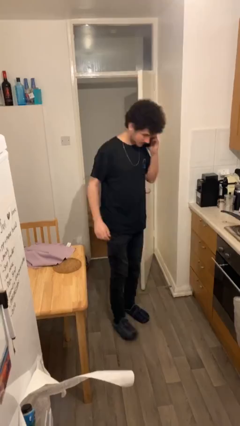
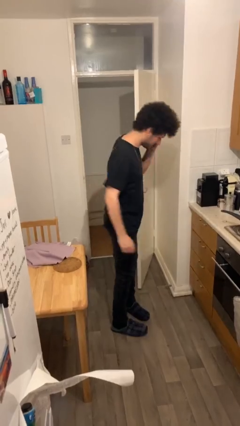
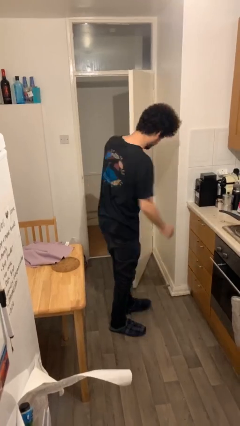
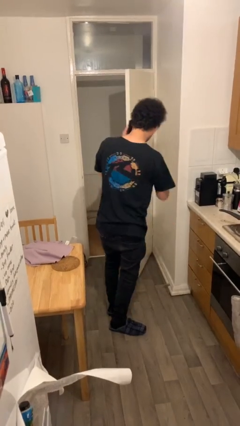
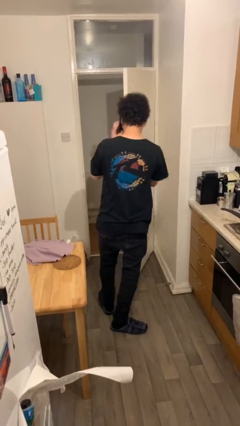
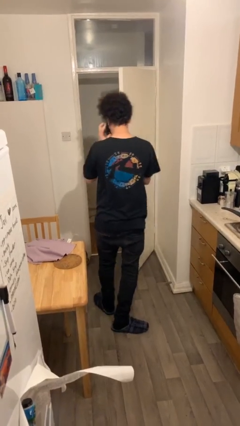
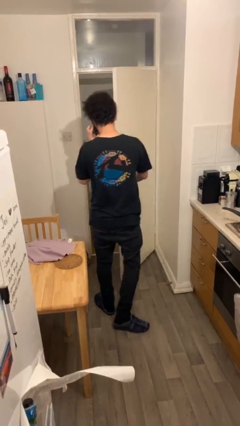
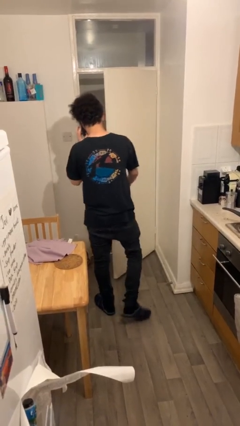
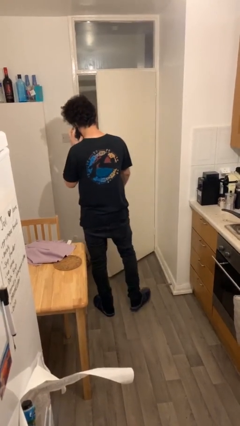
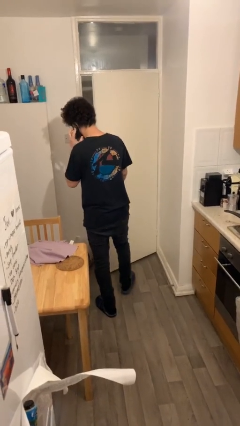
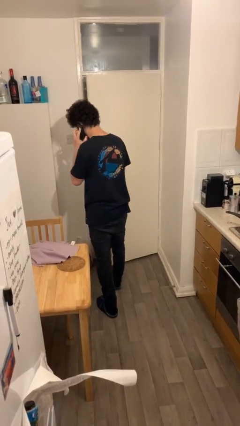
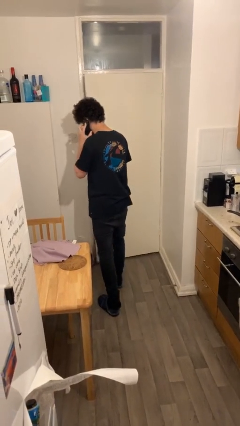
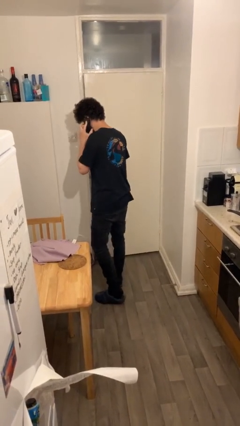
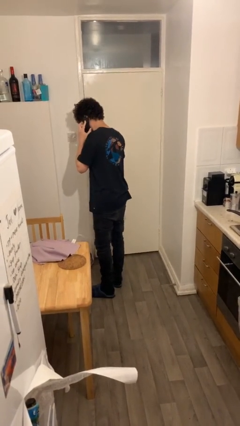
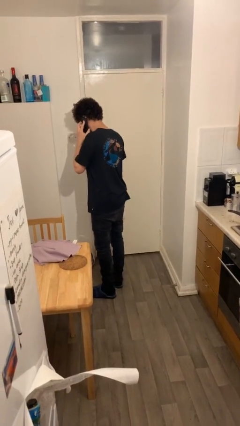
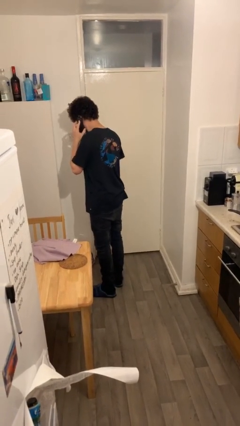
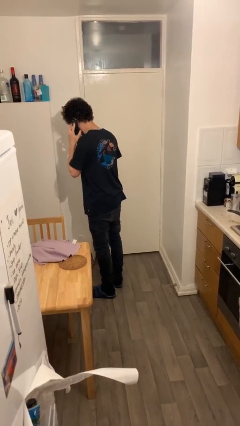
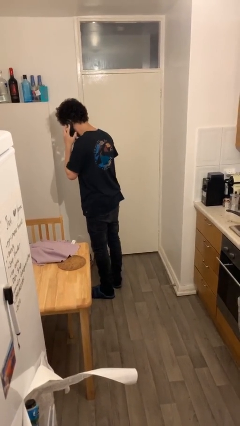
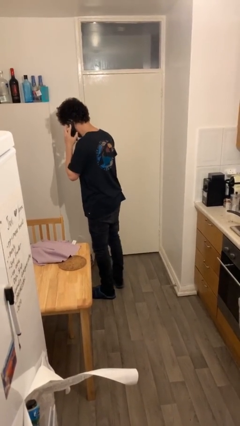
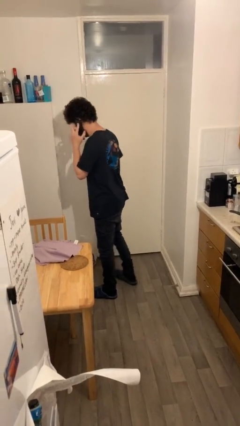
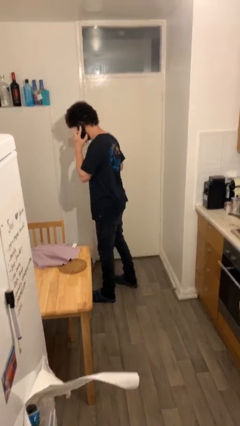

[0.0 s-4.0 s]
person closes facility door

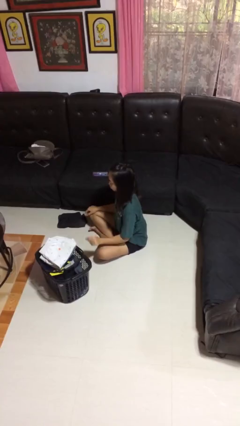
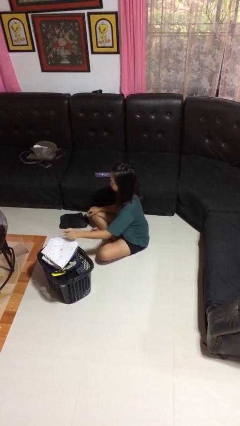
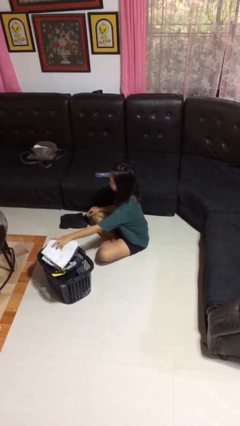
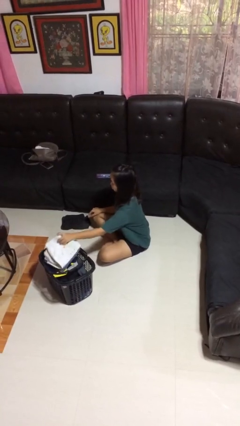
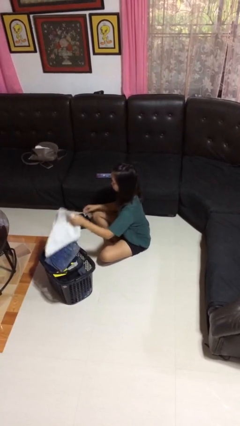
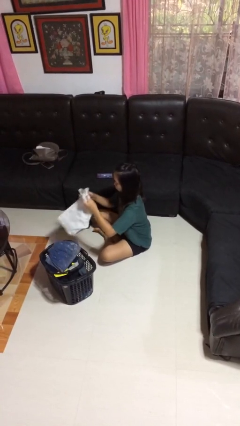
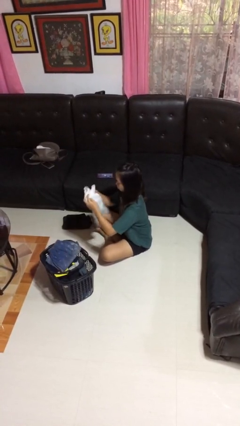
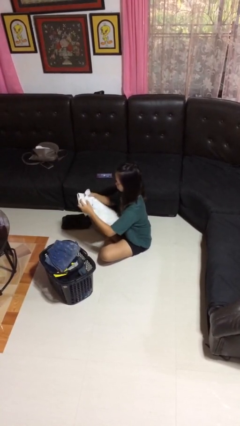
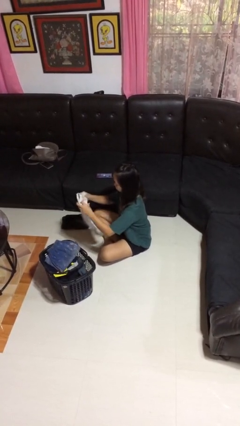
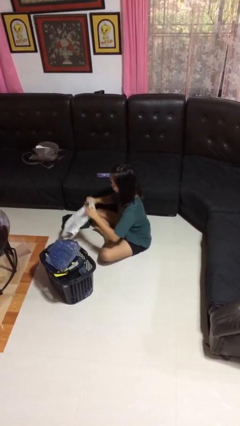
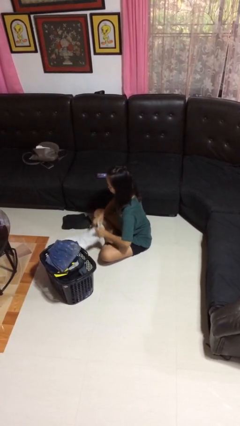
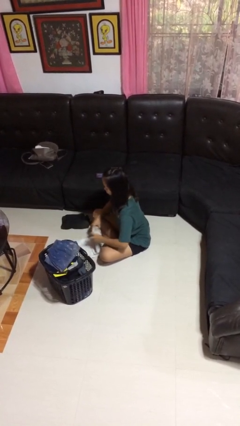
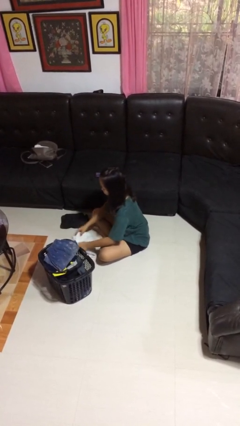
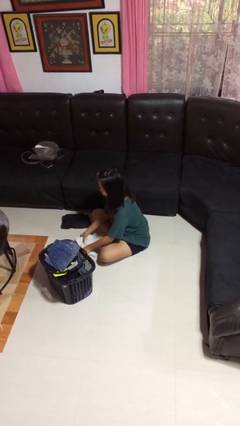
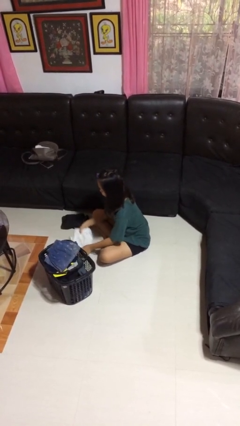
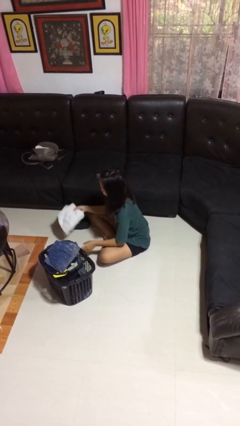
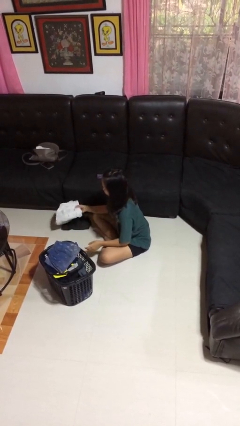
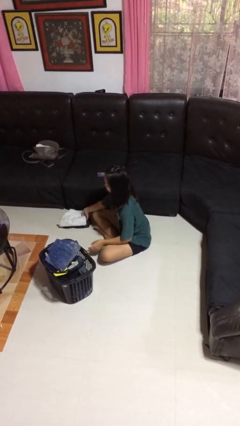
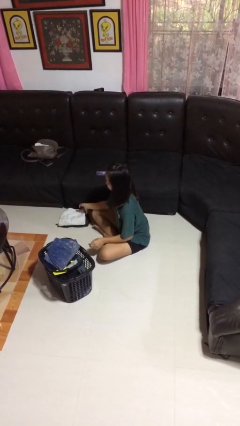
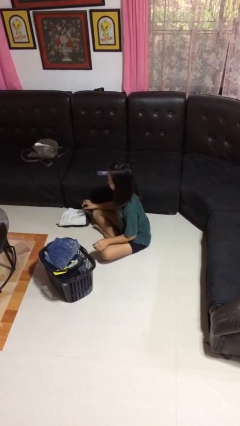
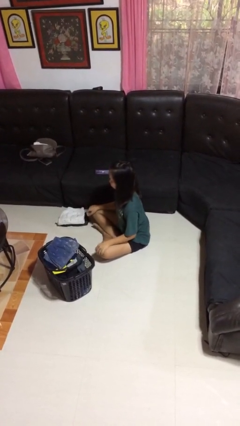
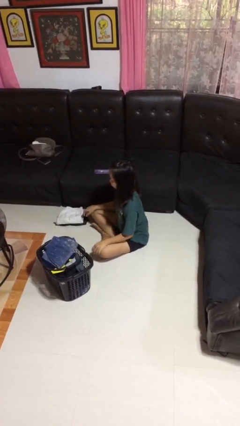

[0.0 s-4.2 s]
person folds pants

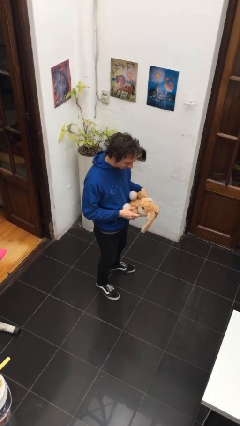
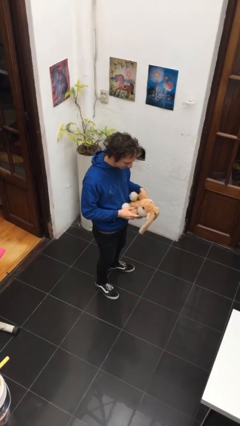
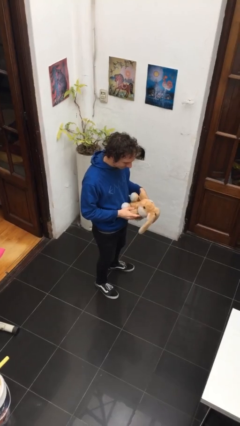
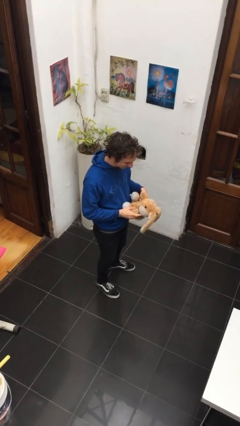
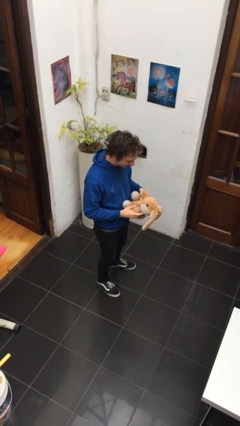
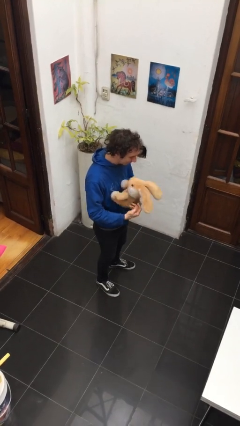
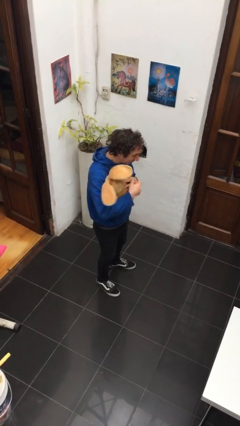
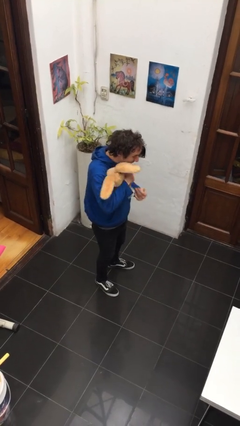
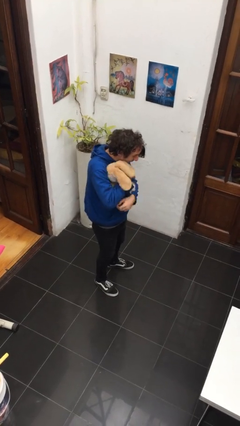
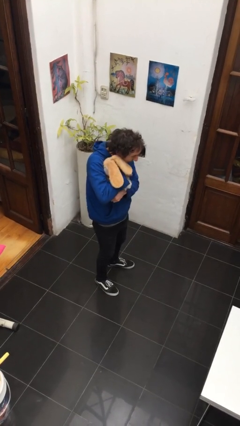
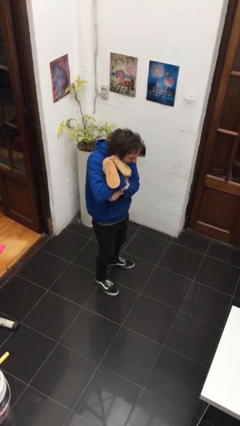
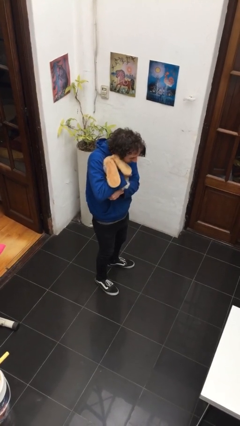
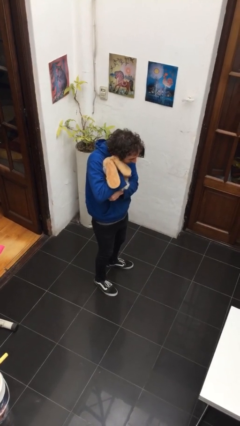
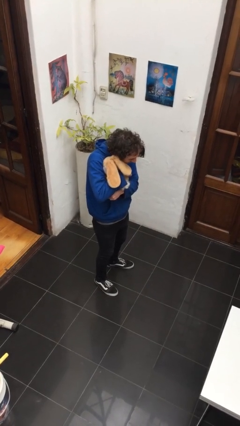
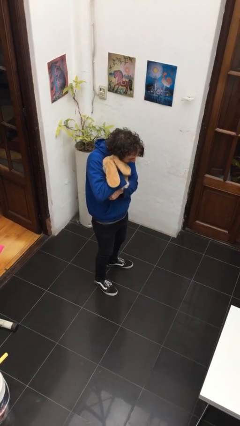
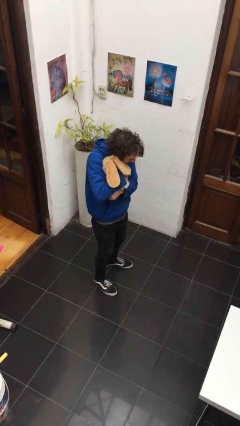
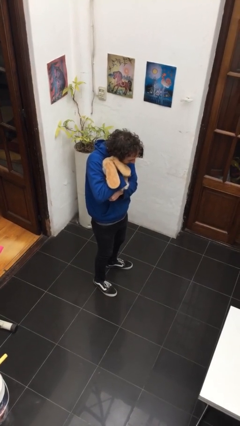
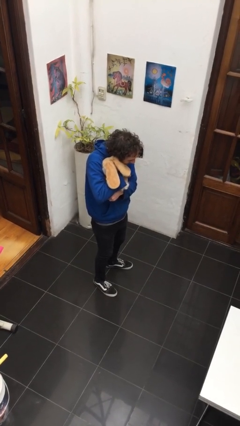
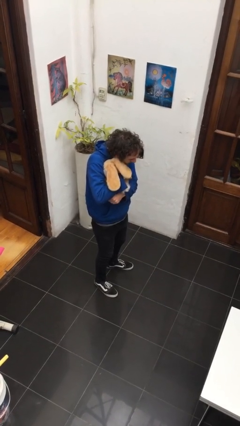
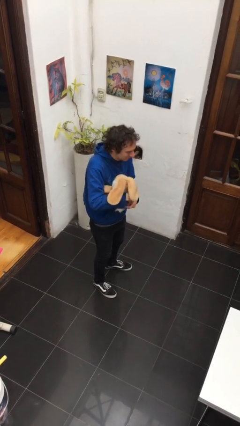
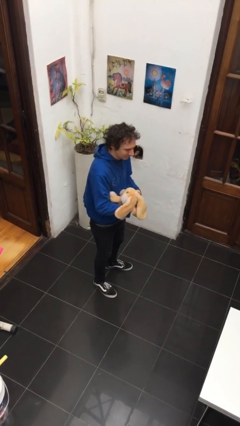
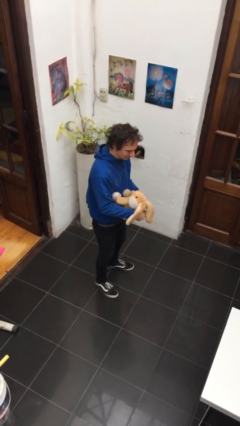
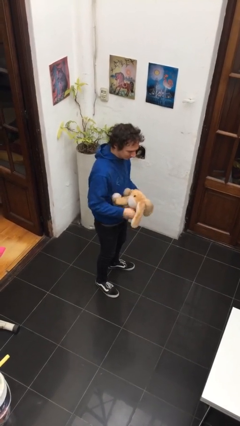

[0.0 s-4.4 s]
person hugs stuffed animal

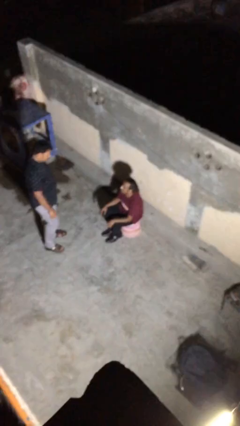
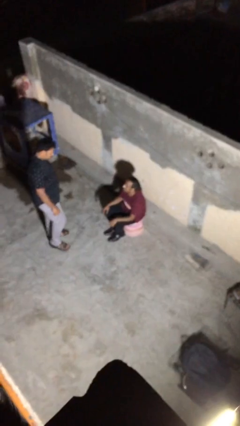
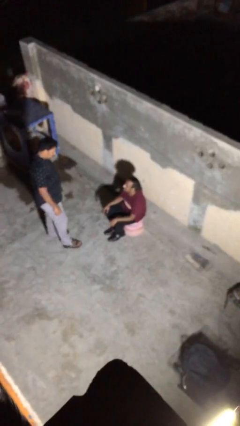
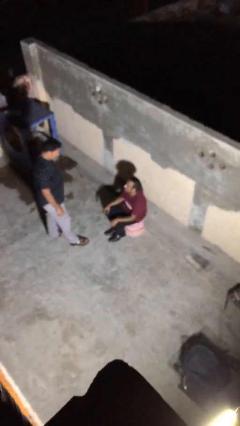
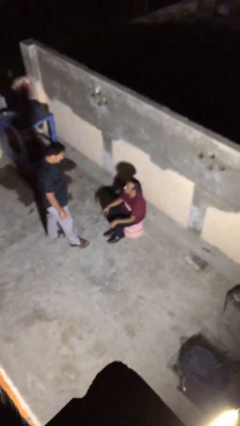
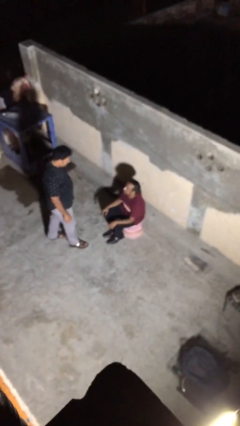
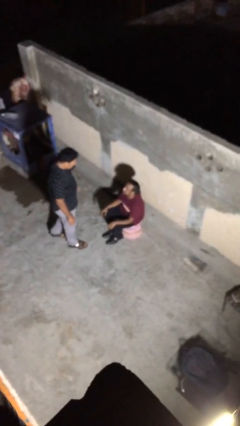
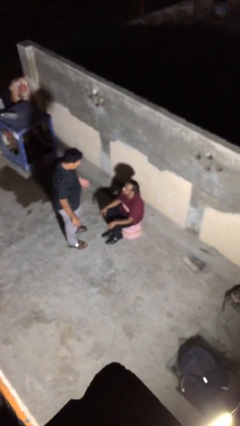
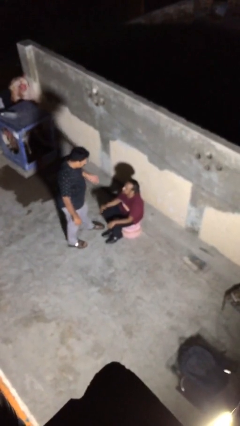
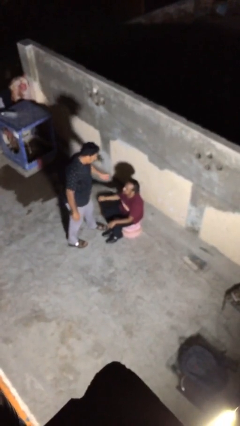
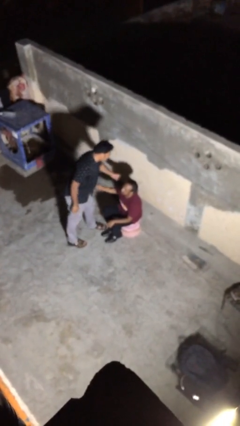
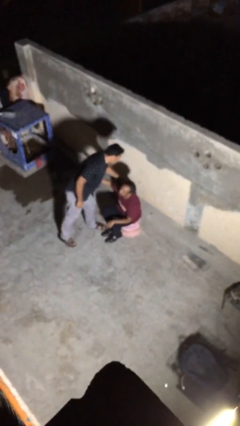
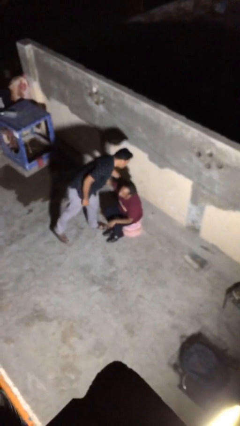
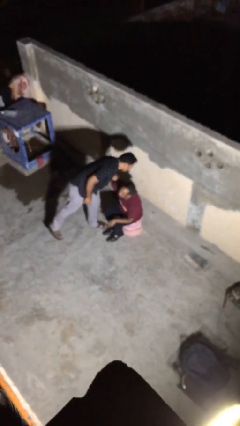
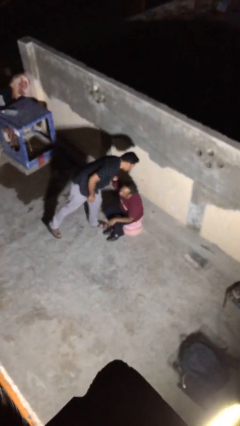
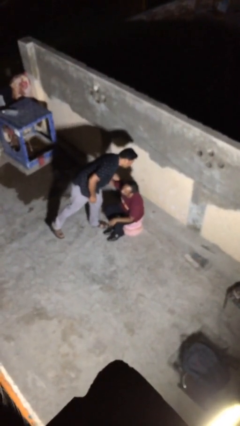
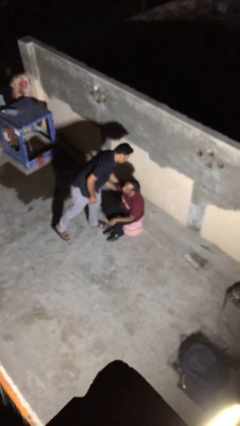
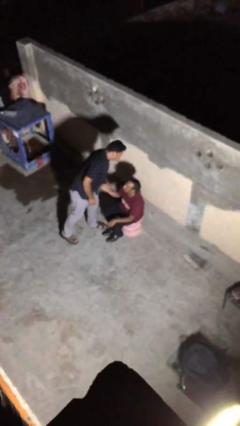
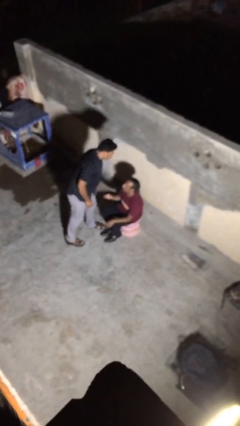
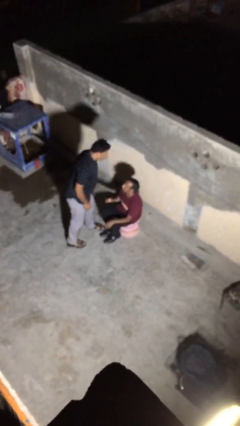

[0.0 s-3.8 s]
person embraces person

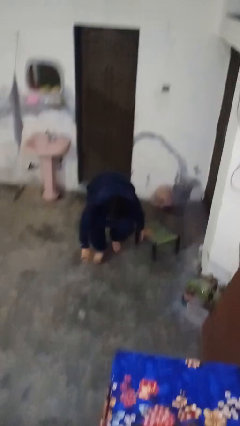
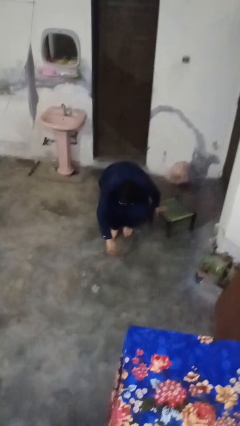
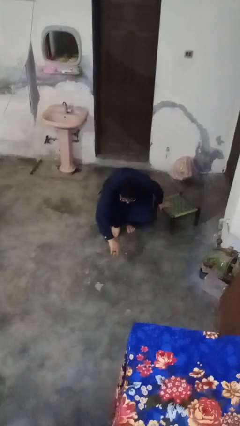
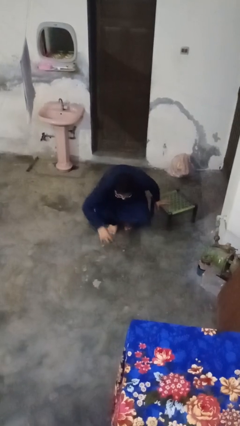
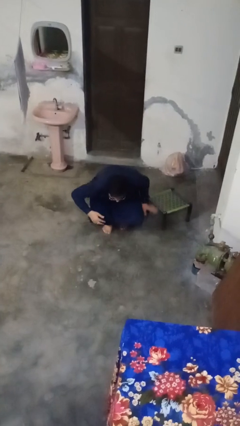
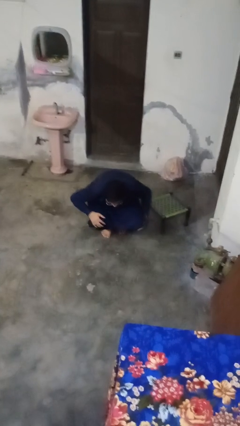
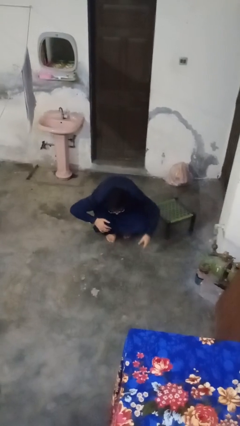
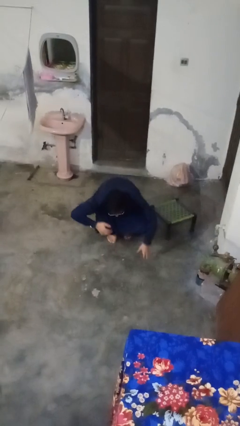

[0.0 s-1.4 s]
person lies down on floor
